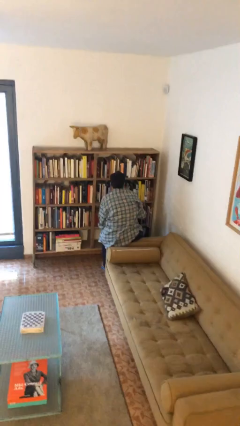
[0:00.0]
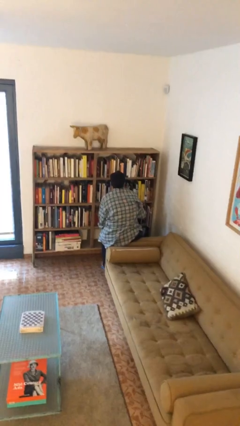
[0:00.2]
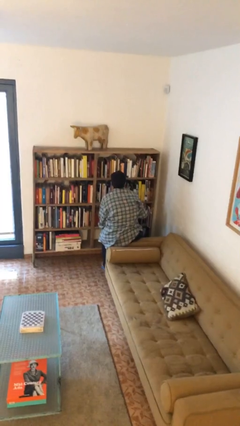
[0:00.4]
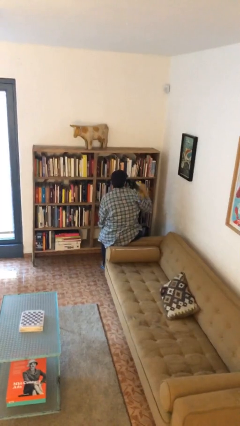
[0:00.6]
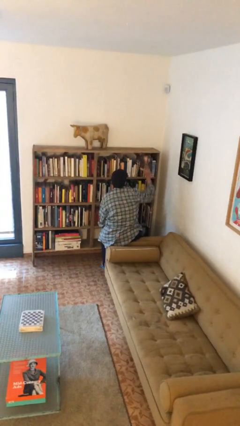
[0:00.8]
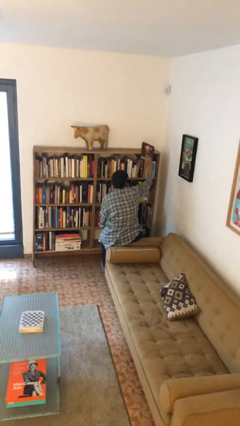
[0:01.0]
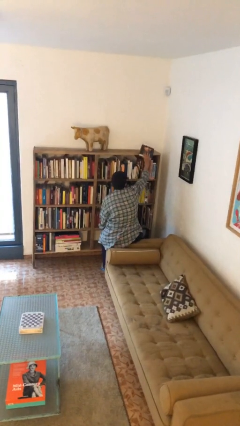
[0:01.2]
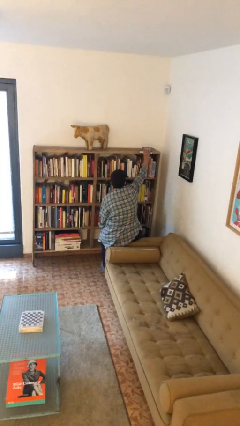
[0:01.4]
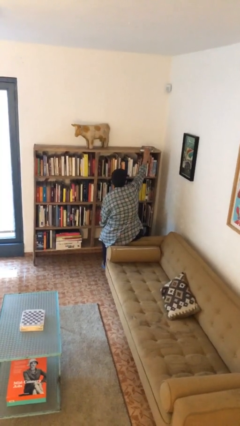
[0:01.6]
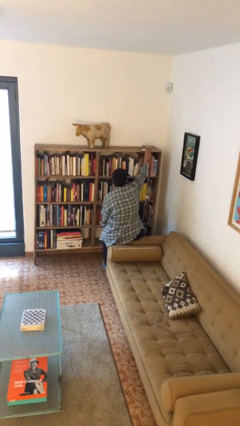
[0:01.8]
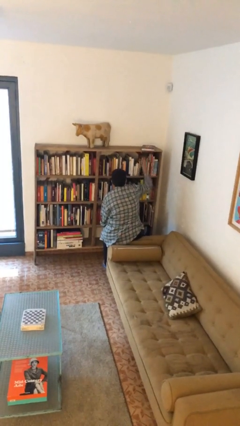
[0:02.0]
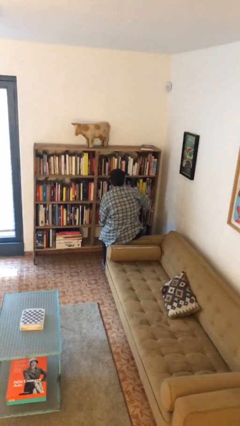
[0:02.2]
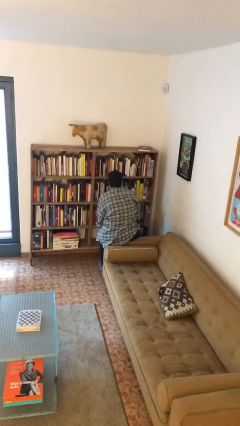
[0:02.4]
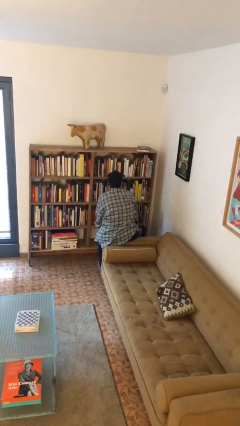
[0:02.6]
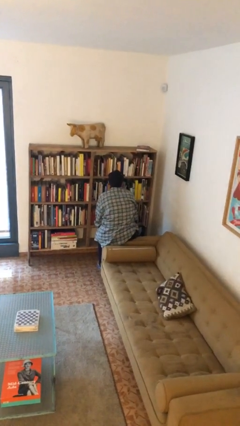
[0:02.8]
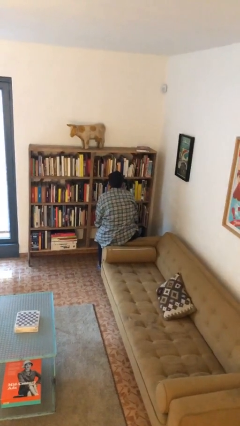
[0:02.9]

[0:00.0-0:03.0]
person puts down object on shelf

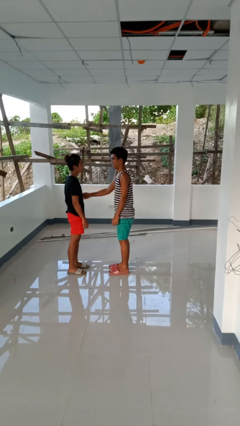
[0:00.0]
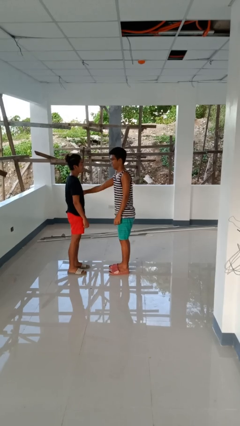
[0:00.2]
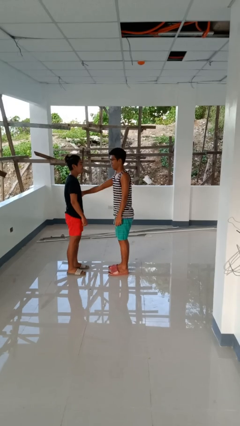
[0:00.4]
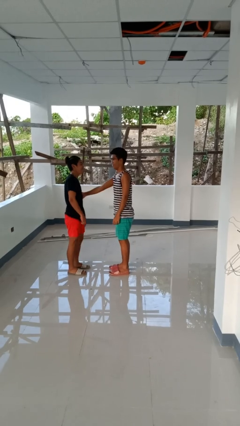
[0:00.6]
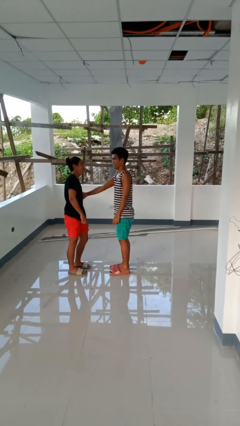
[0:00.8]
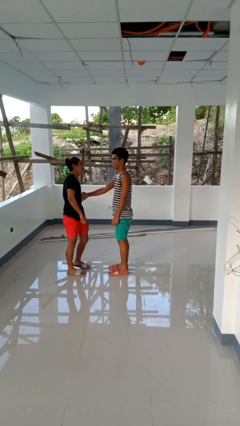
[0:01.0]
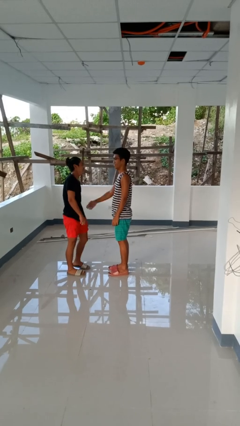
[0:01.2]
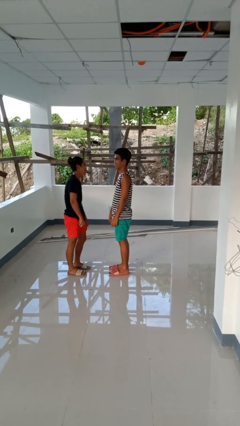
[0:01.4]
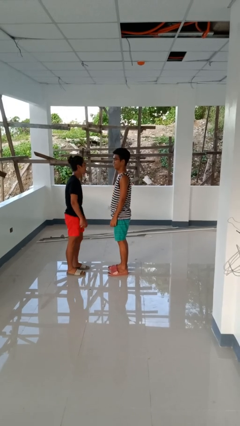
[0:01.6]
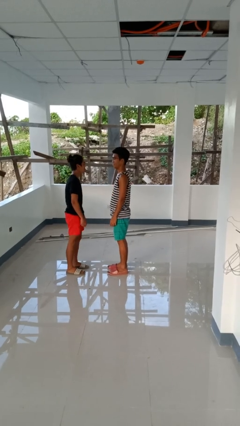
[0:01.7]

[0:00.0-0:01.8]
person tickles person

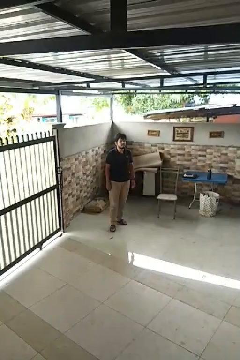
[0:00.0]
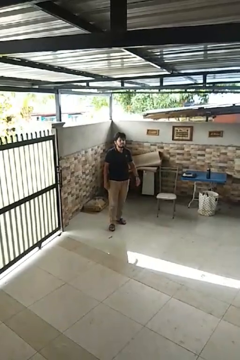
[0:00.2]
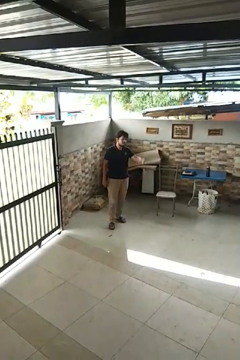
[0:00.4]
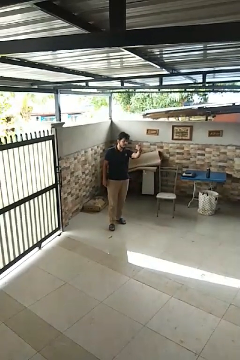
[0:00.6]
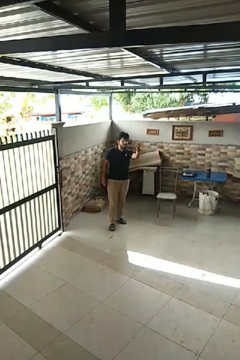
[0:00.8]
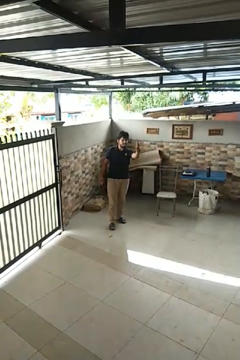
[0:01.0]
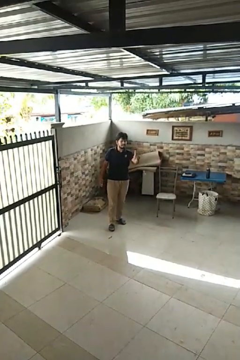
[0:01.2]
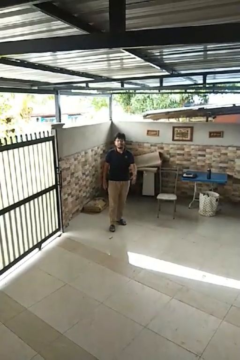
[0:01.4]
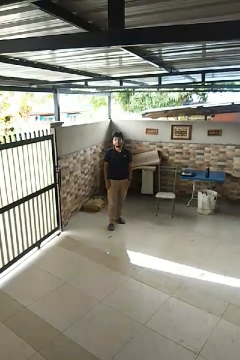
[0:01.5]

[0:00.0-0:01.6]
person gestures come here

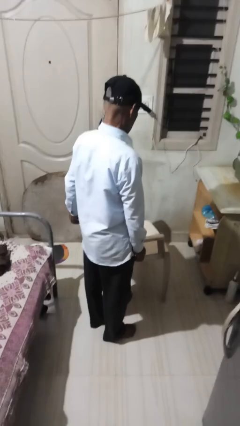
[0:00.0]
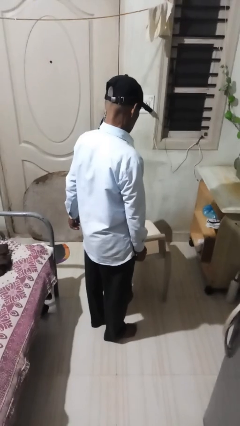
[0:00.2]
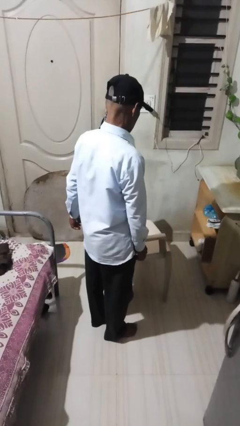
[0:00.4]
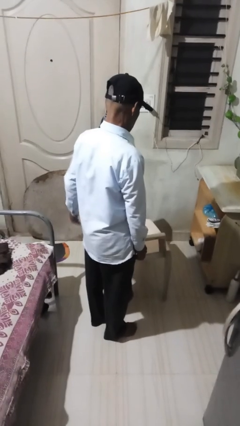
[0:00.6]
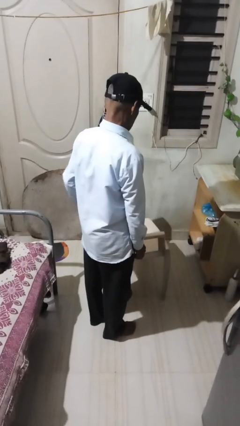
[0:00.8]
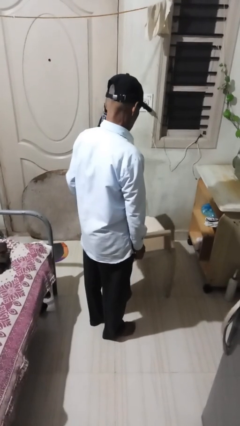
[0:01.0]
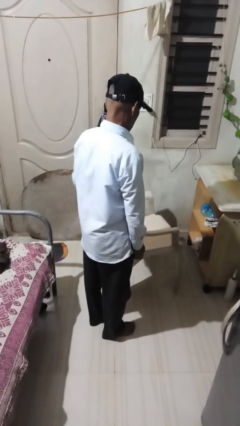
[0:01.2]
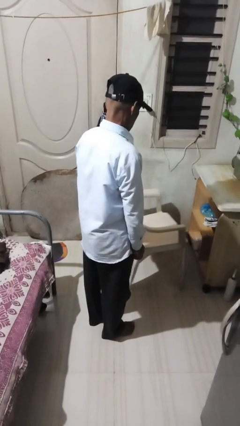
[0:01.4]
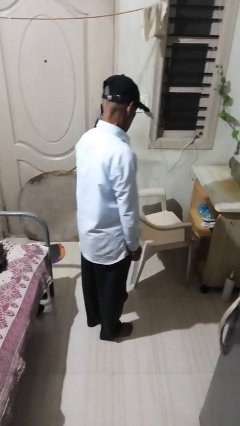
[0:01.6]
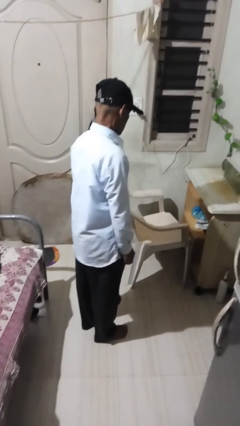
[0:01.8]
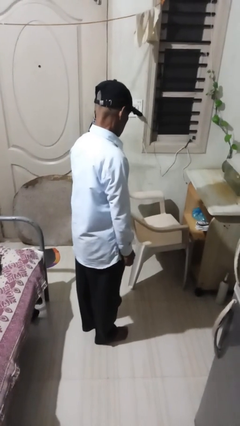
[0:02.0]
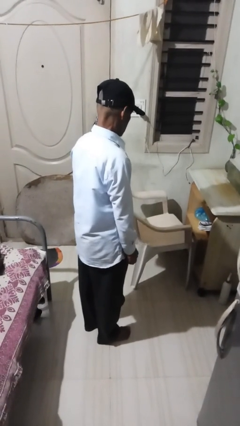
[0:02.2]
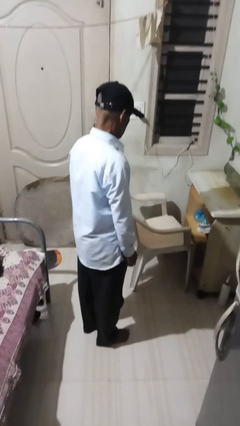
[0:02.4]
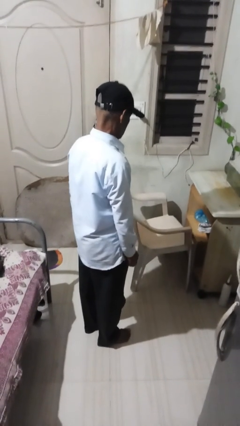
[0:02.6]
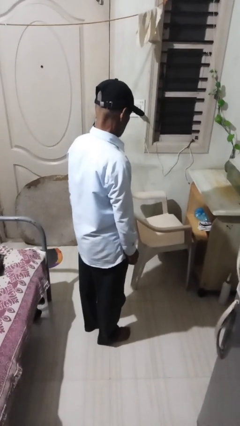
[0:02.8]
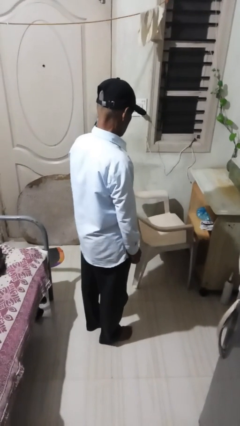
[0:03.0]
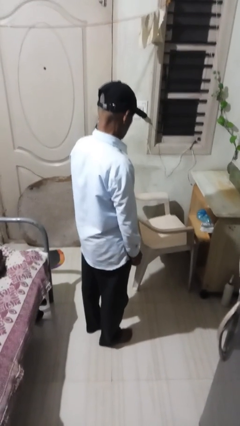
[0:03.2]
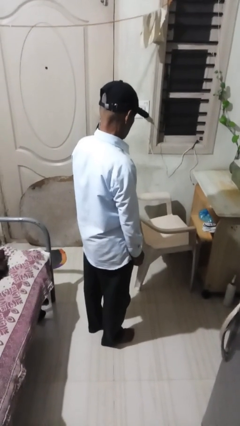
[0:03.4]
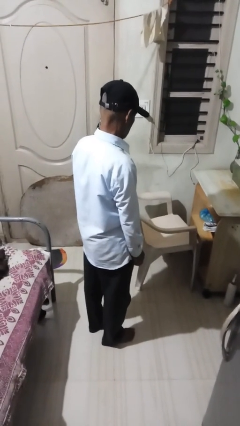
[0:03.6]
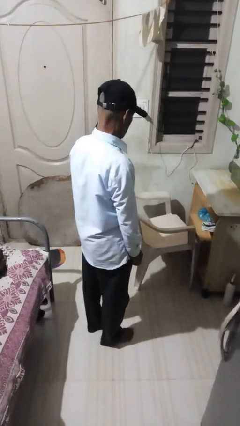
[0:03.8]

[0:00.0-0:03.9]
person pushes in chair

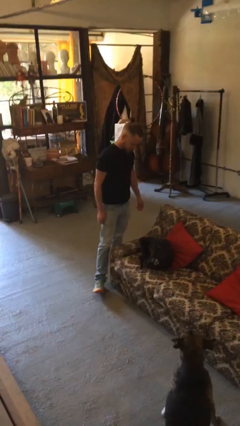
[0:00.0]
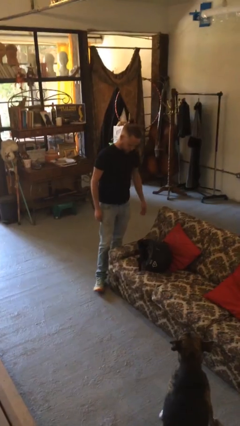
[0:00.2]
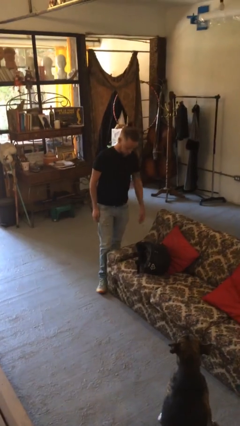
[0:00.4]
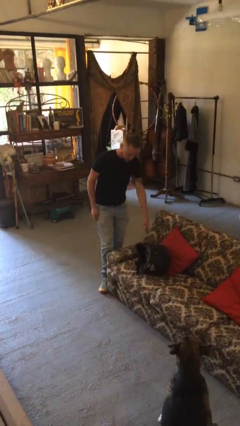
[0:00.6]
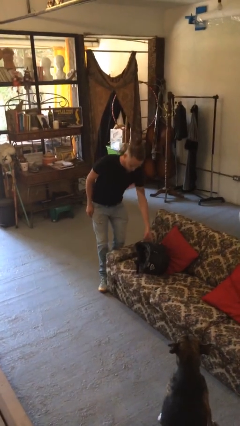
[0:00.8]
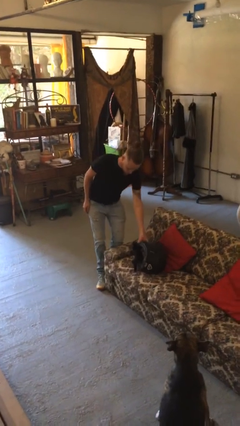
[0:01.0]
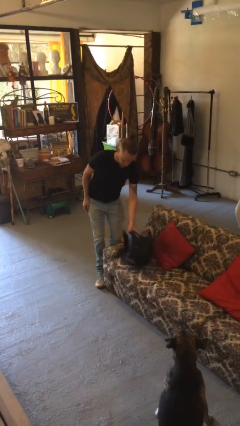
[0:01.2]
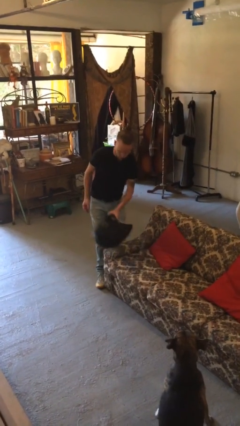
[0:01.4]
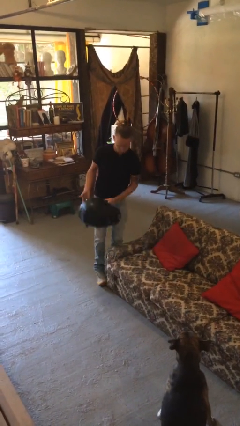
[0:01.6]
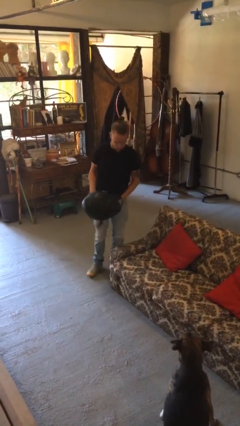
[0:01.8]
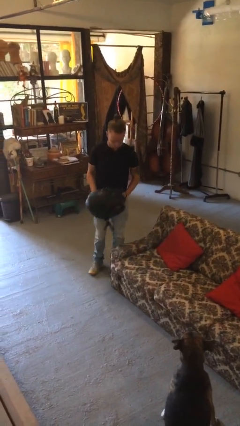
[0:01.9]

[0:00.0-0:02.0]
person picks up object from couch

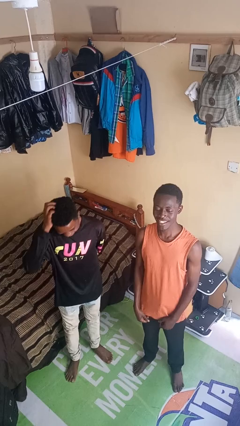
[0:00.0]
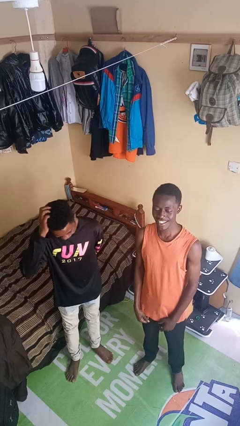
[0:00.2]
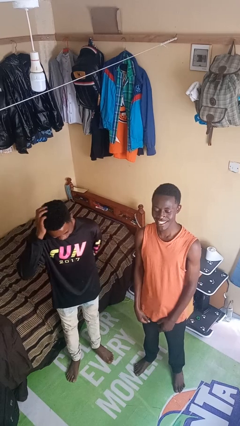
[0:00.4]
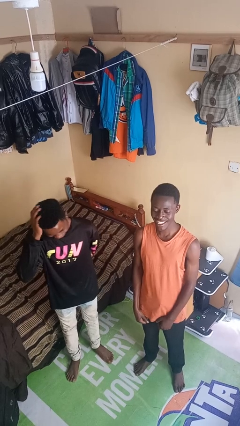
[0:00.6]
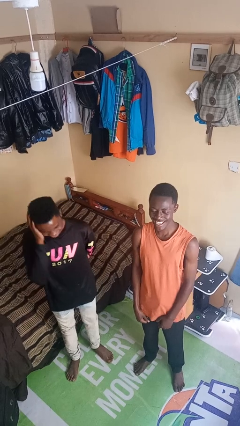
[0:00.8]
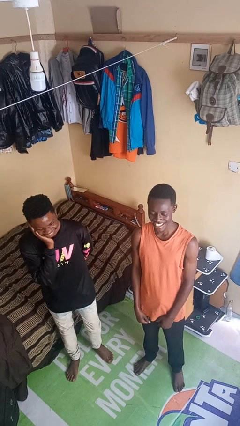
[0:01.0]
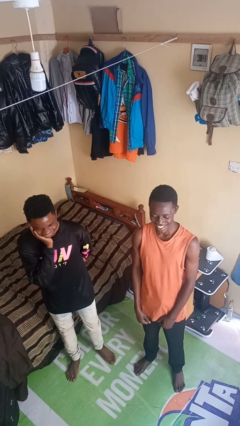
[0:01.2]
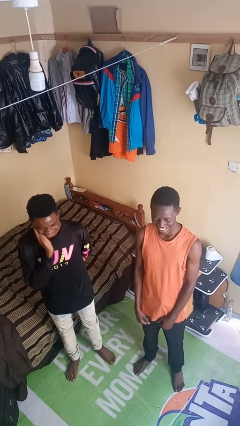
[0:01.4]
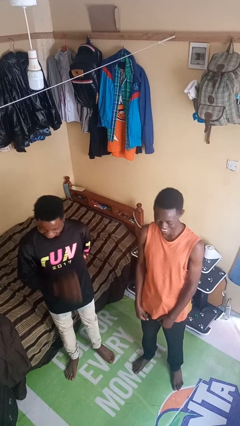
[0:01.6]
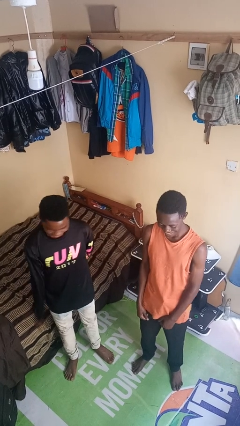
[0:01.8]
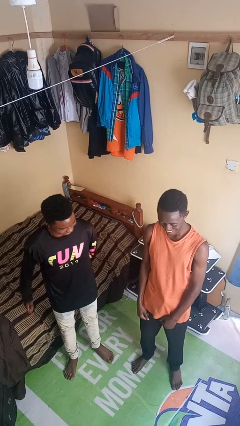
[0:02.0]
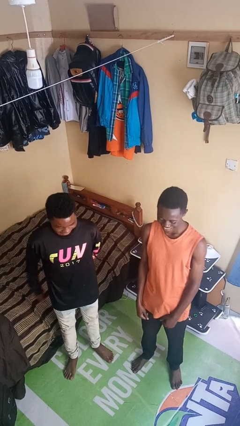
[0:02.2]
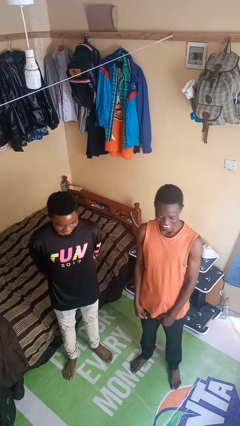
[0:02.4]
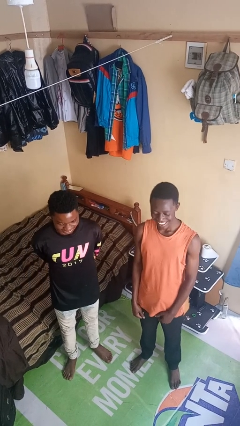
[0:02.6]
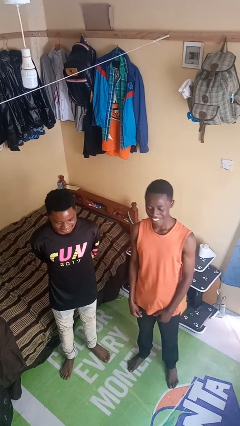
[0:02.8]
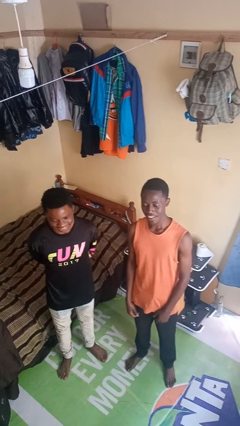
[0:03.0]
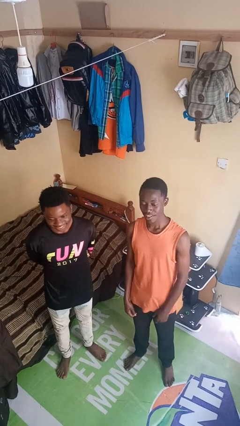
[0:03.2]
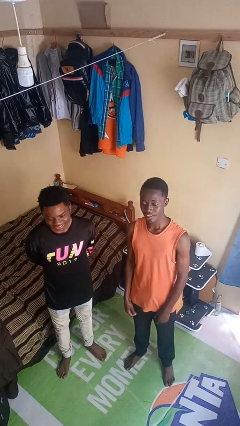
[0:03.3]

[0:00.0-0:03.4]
person laughs with person

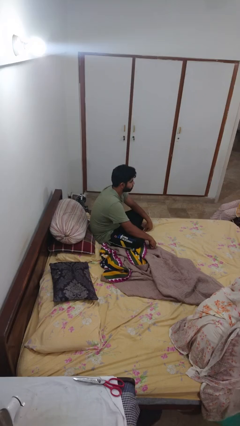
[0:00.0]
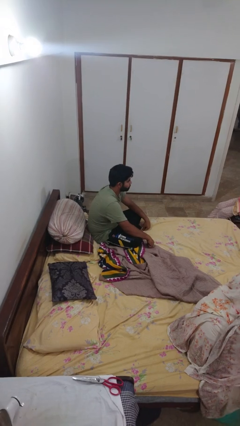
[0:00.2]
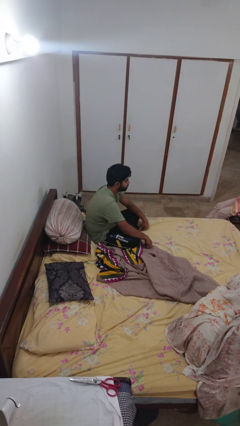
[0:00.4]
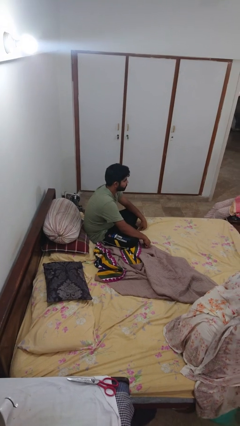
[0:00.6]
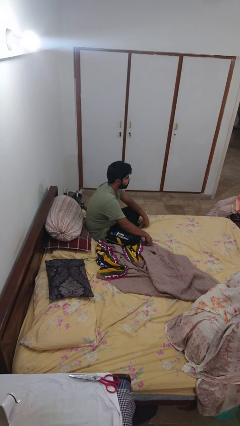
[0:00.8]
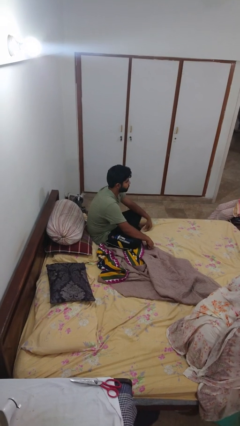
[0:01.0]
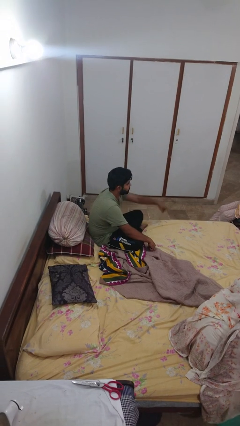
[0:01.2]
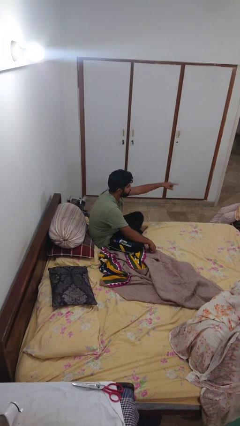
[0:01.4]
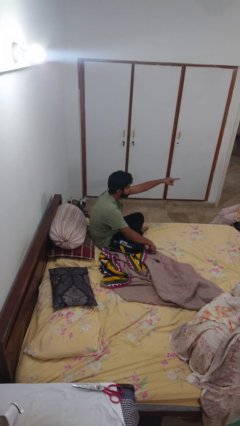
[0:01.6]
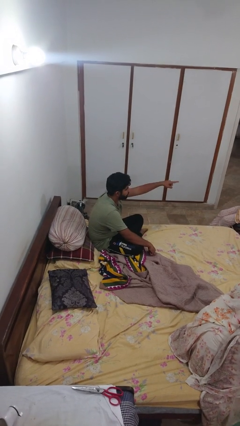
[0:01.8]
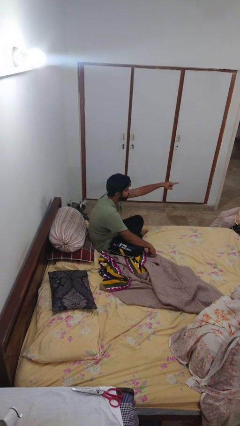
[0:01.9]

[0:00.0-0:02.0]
person points at person
